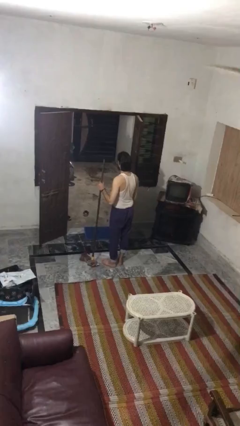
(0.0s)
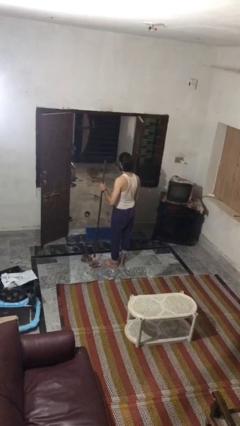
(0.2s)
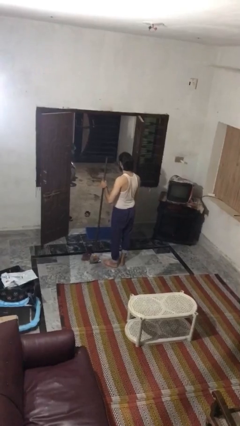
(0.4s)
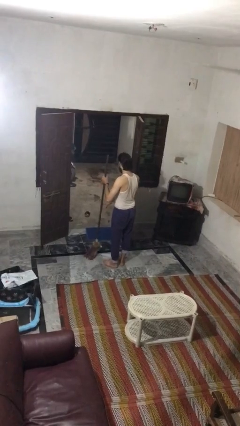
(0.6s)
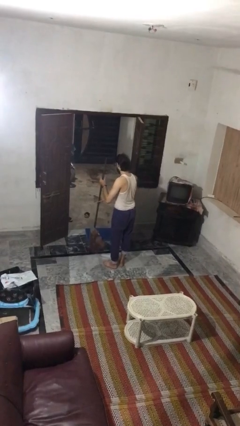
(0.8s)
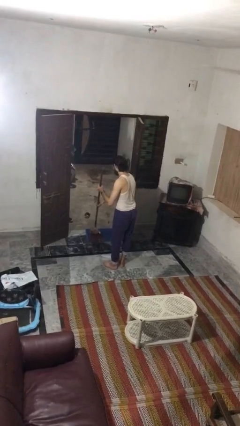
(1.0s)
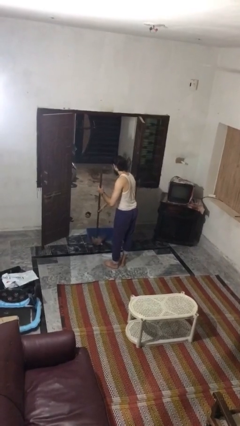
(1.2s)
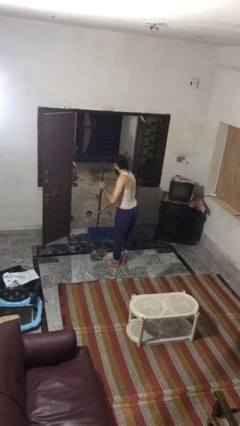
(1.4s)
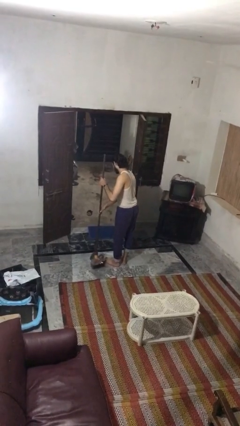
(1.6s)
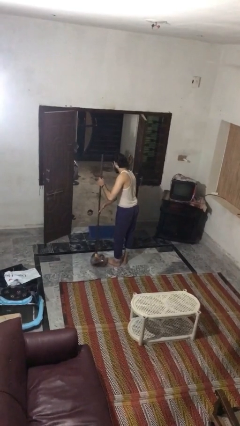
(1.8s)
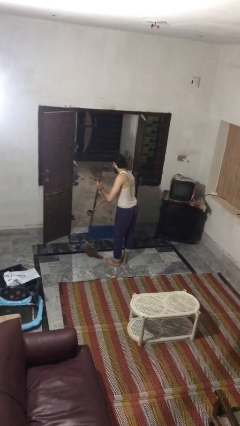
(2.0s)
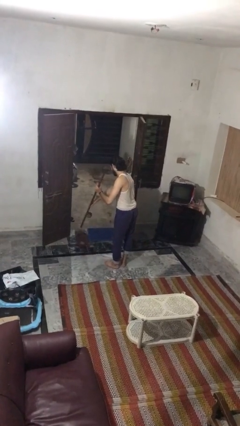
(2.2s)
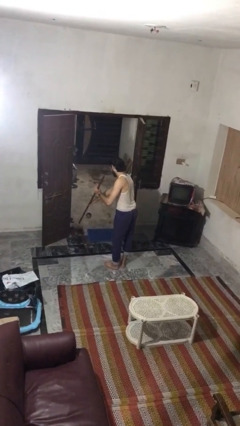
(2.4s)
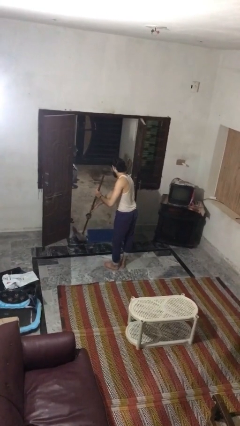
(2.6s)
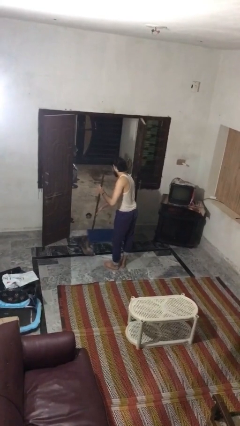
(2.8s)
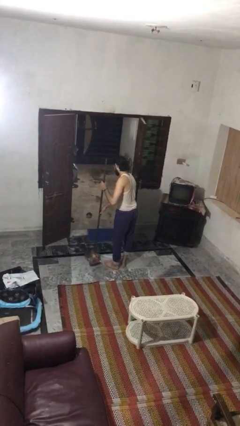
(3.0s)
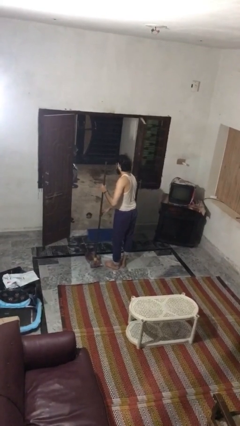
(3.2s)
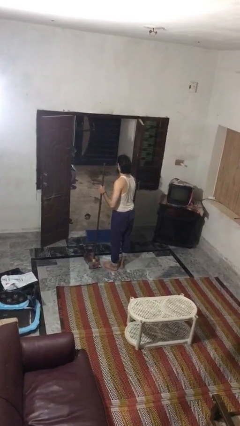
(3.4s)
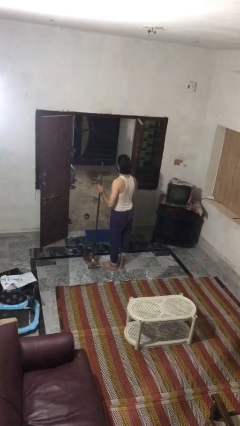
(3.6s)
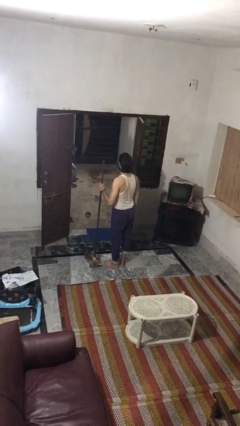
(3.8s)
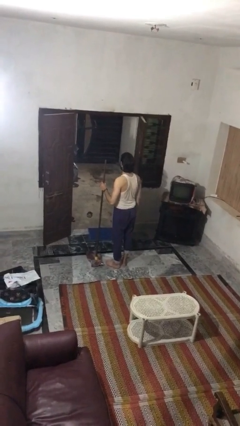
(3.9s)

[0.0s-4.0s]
person mops

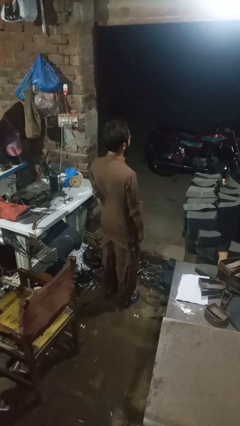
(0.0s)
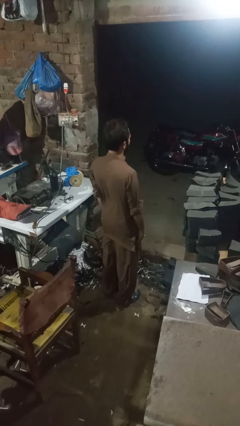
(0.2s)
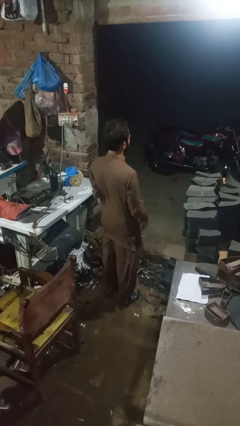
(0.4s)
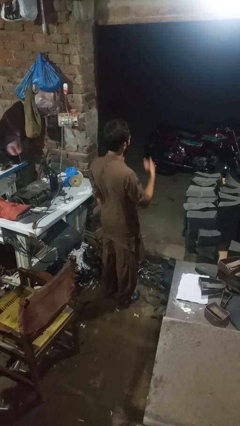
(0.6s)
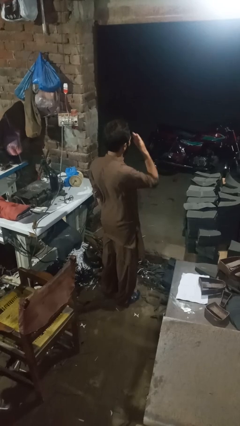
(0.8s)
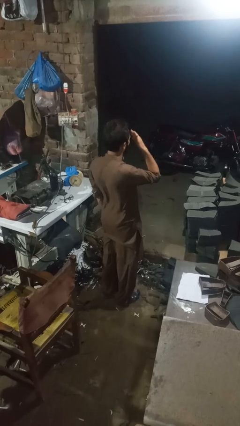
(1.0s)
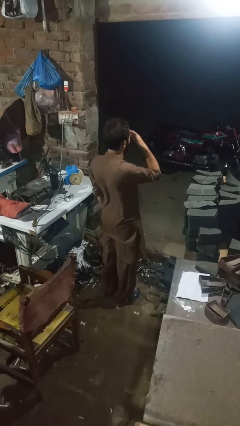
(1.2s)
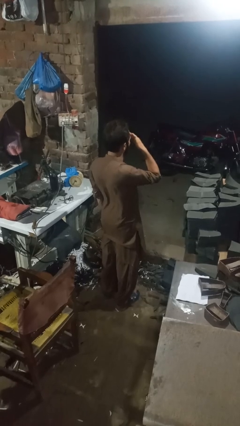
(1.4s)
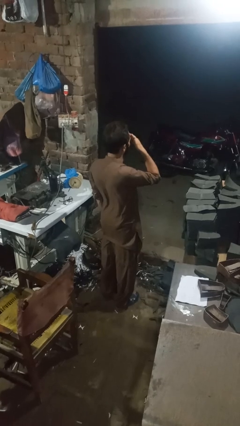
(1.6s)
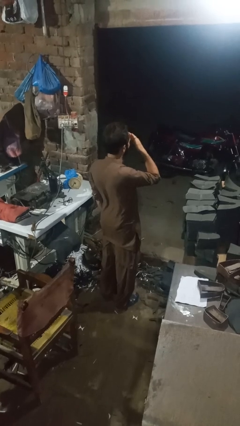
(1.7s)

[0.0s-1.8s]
person rubs eyes

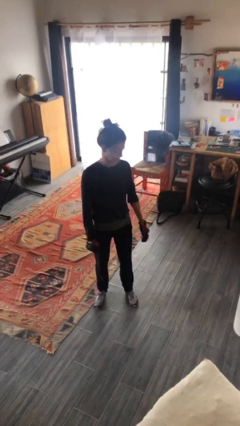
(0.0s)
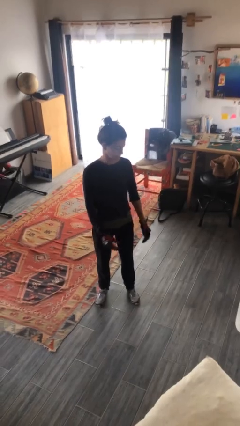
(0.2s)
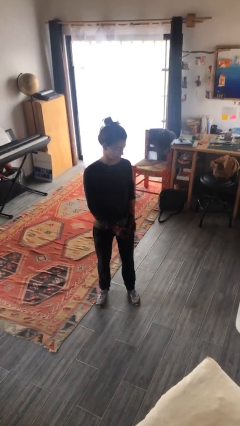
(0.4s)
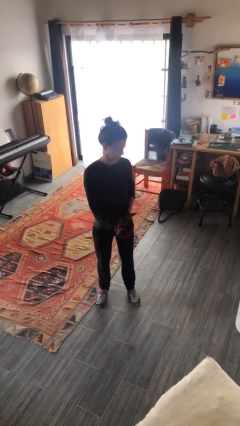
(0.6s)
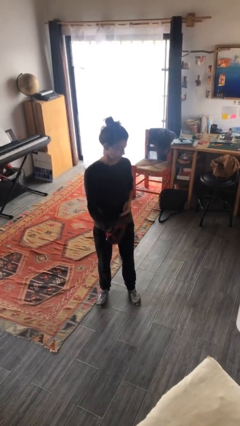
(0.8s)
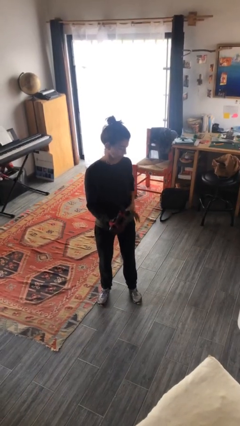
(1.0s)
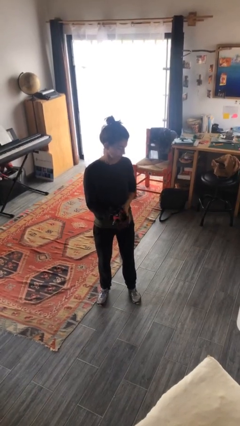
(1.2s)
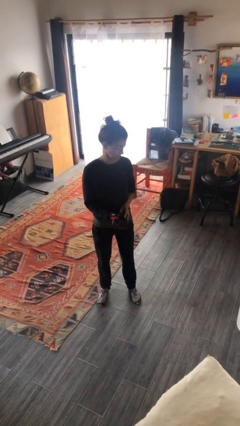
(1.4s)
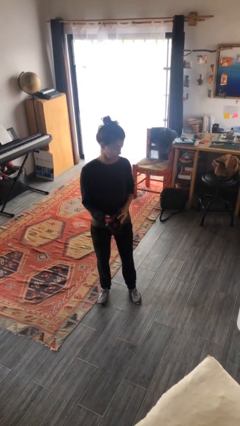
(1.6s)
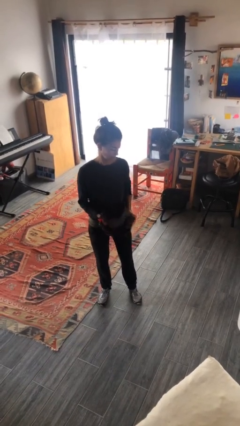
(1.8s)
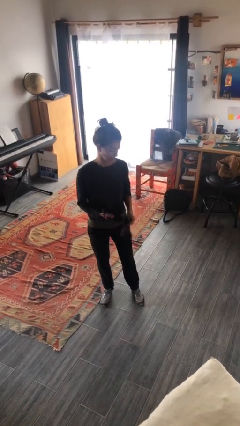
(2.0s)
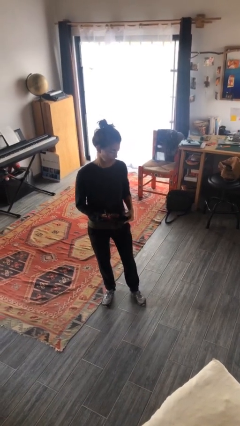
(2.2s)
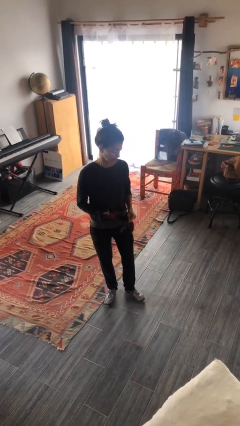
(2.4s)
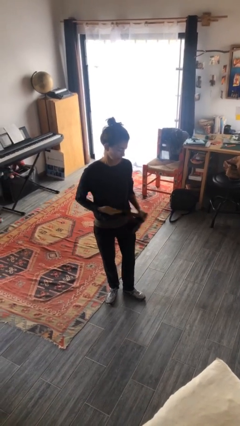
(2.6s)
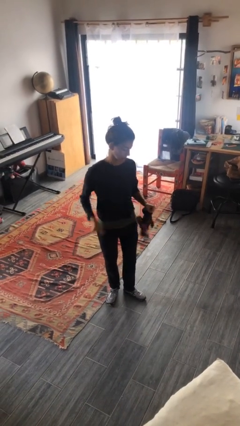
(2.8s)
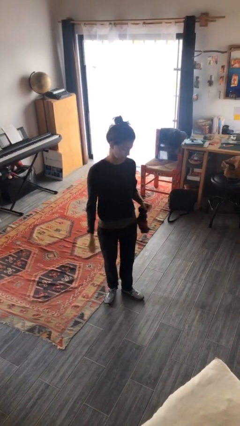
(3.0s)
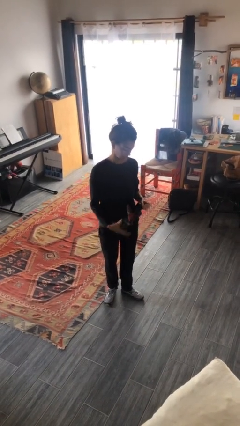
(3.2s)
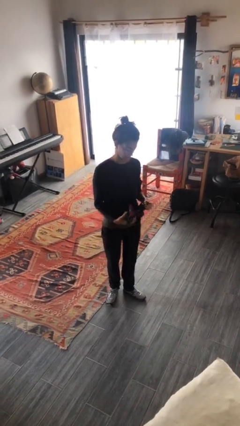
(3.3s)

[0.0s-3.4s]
person takes off gloves

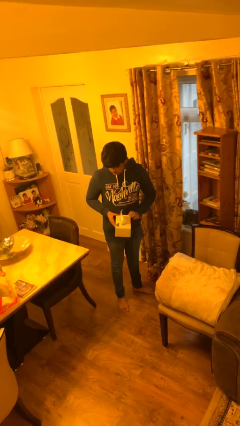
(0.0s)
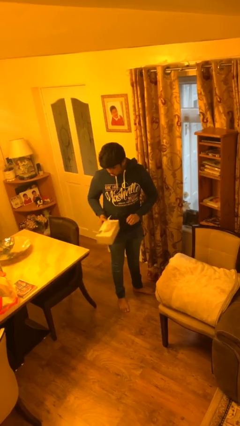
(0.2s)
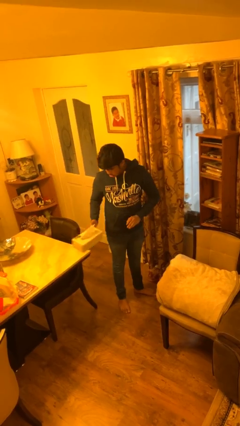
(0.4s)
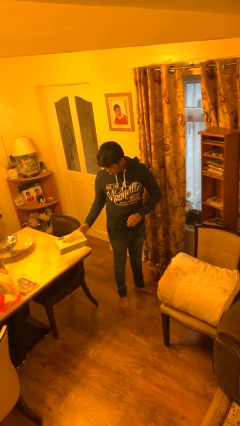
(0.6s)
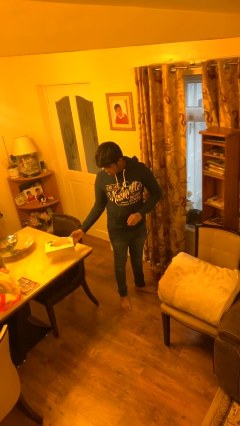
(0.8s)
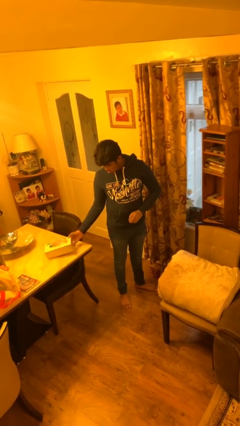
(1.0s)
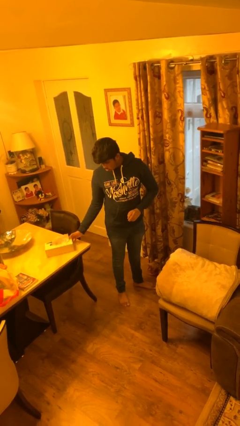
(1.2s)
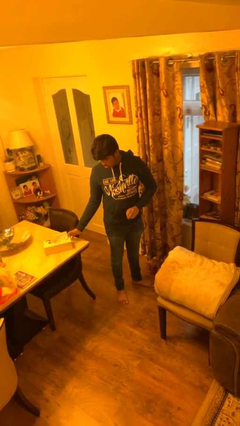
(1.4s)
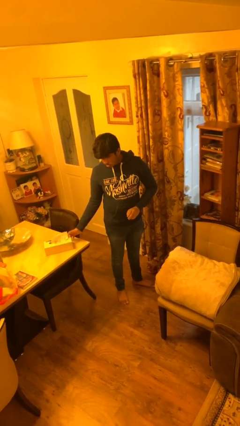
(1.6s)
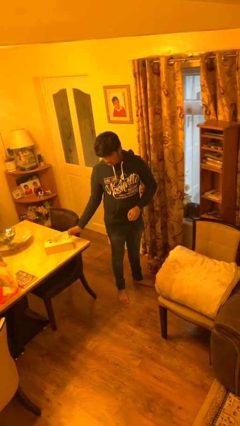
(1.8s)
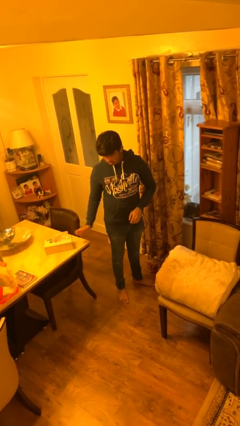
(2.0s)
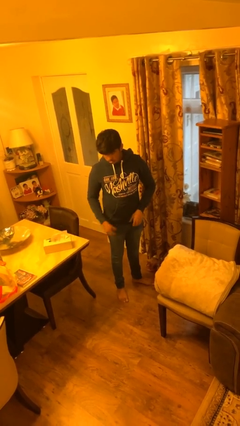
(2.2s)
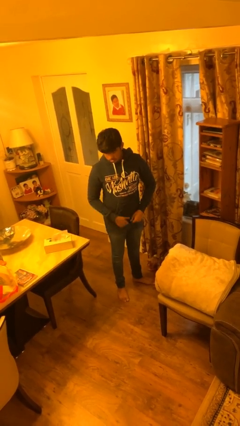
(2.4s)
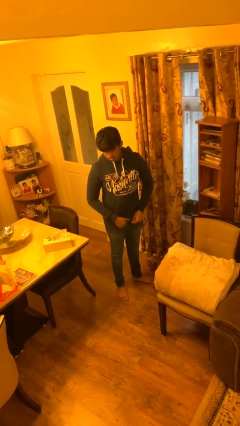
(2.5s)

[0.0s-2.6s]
person puts down object on table

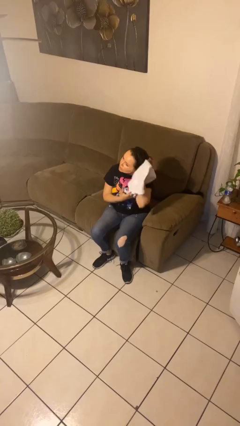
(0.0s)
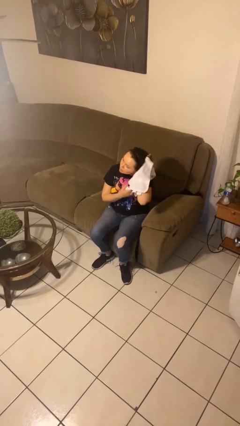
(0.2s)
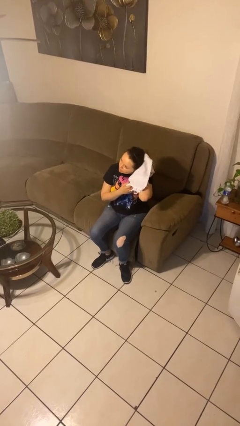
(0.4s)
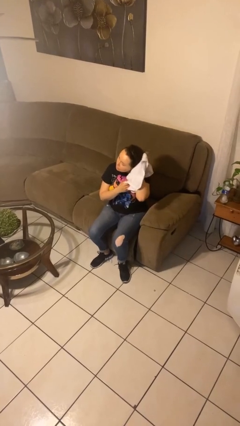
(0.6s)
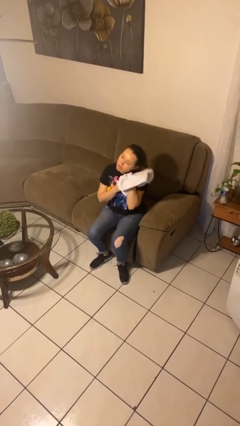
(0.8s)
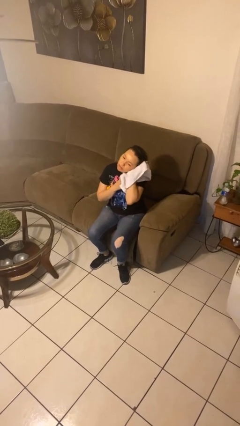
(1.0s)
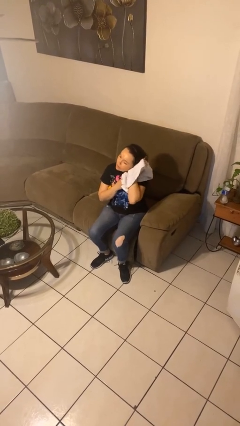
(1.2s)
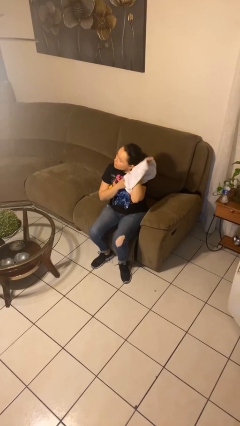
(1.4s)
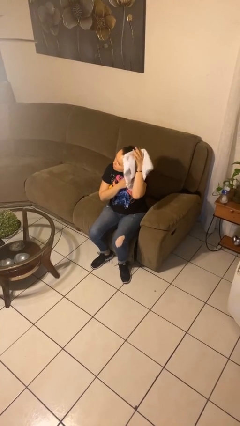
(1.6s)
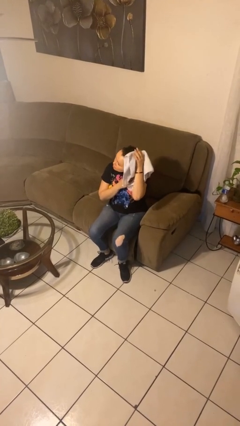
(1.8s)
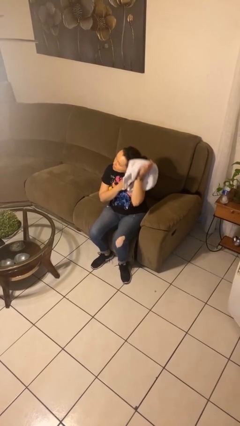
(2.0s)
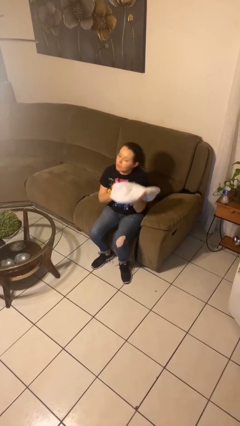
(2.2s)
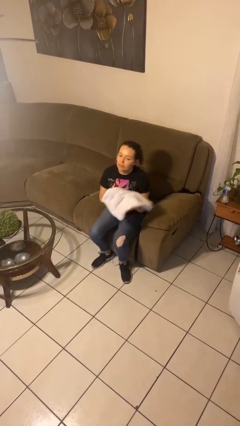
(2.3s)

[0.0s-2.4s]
person dries hair with towel

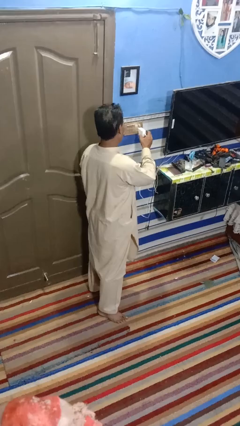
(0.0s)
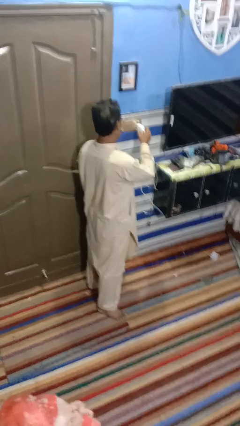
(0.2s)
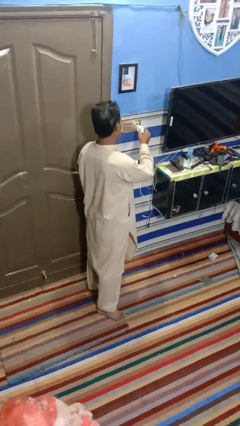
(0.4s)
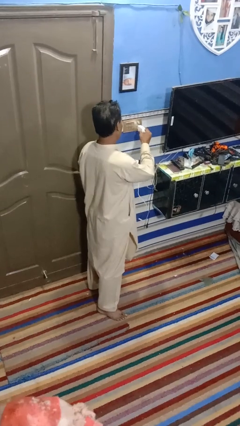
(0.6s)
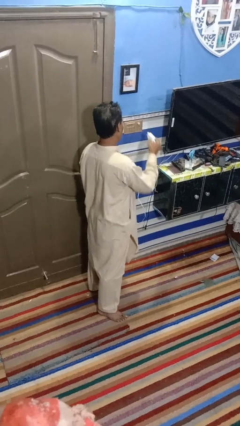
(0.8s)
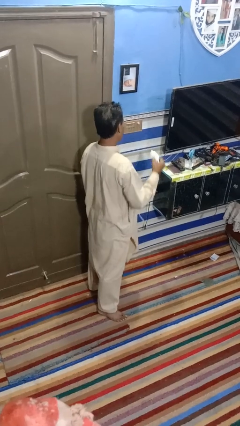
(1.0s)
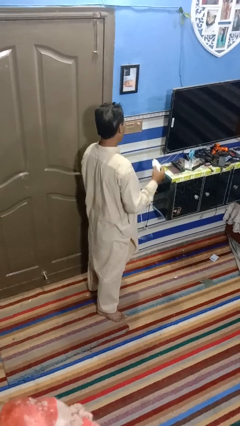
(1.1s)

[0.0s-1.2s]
person unplugs from electrical socket

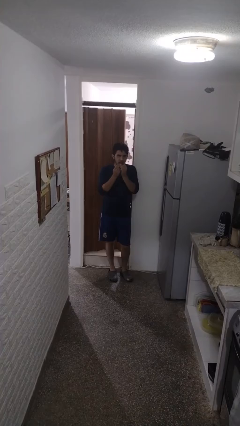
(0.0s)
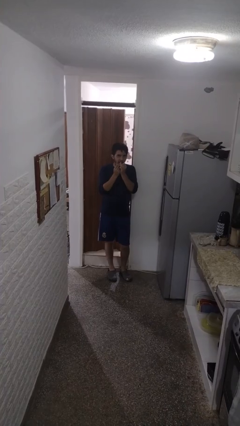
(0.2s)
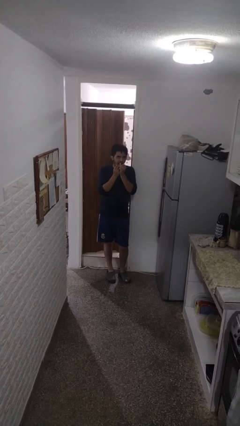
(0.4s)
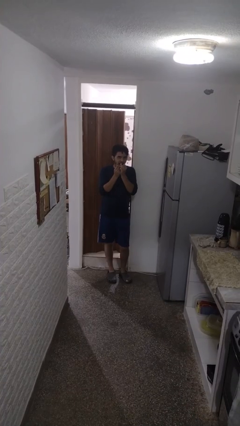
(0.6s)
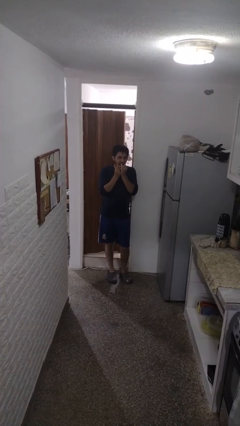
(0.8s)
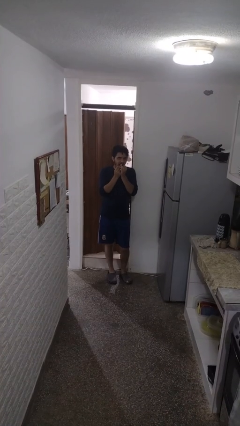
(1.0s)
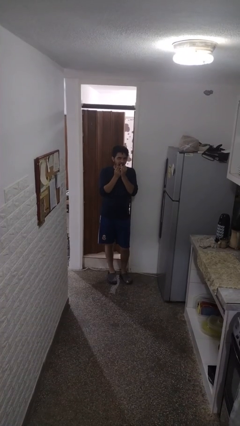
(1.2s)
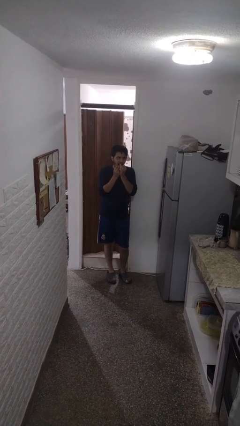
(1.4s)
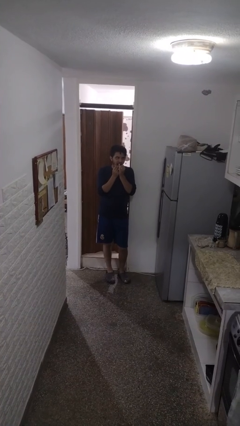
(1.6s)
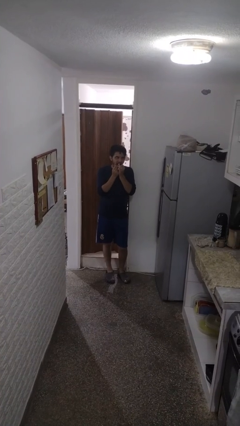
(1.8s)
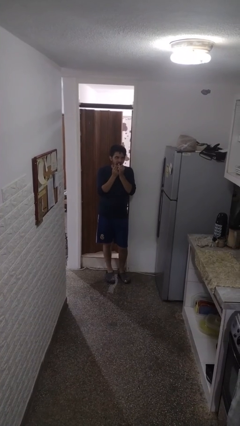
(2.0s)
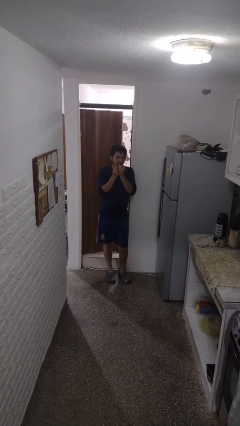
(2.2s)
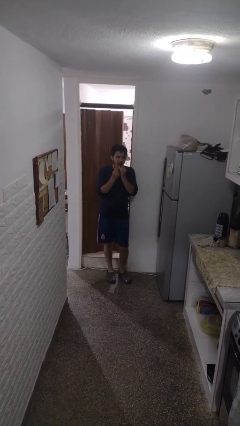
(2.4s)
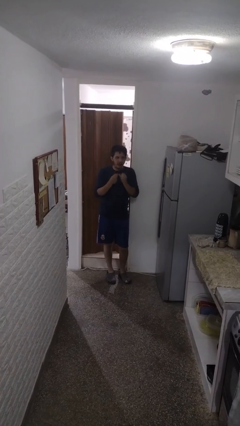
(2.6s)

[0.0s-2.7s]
person flosses
